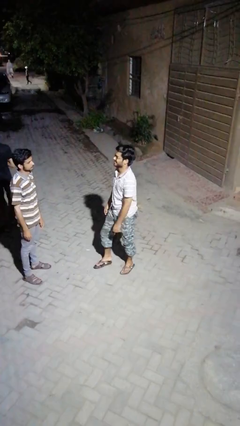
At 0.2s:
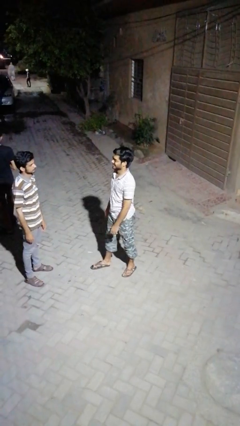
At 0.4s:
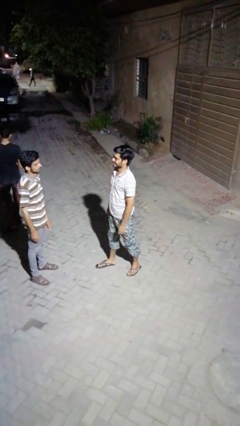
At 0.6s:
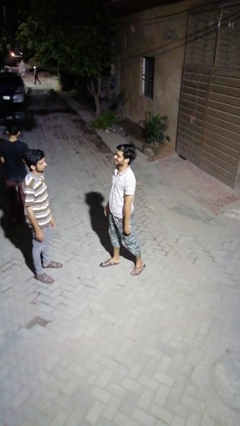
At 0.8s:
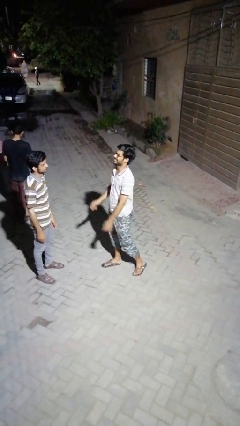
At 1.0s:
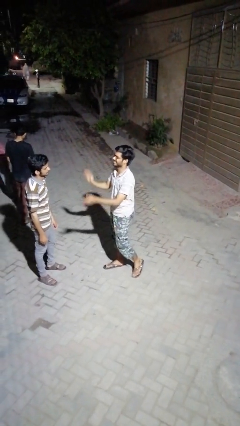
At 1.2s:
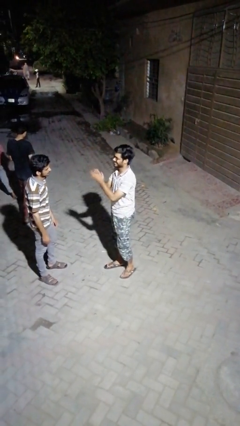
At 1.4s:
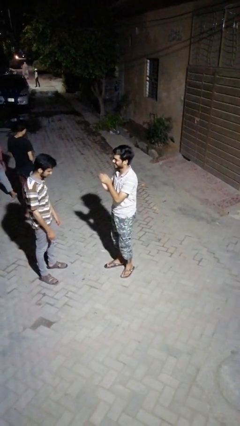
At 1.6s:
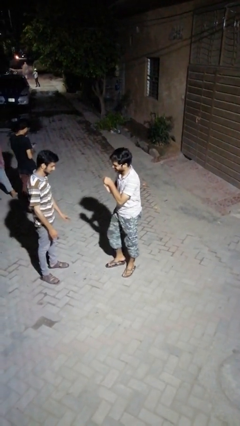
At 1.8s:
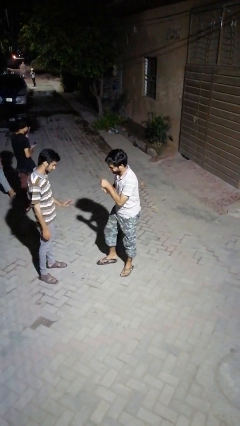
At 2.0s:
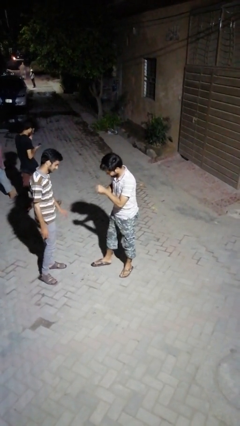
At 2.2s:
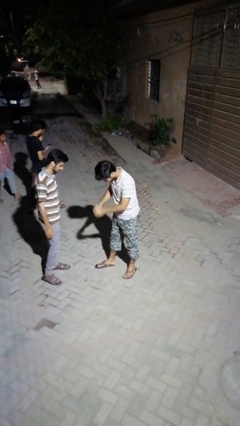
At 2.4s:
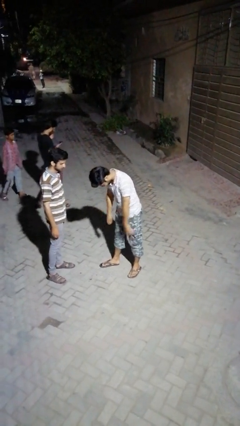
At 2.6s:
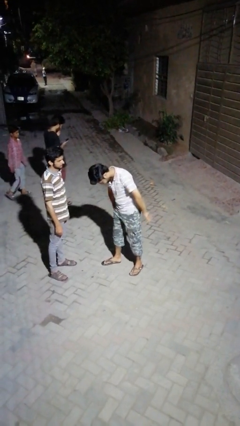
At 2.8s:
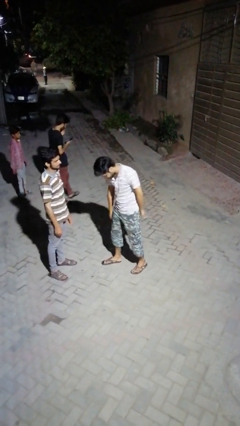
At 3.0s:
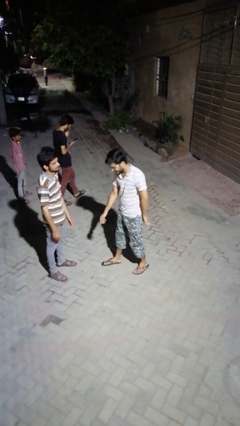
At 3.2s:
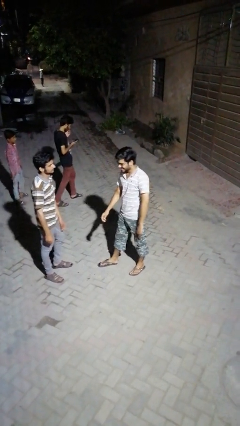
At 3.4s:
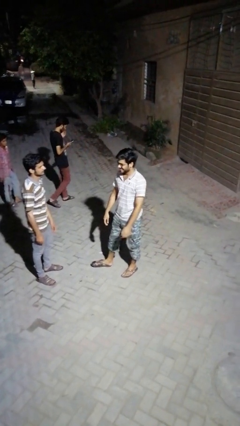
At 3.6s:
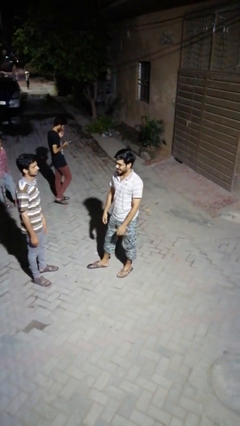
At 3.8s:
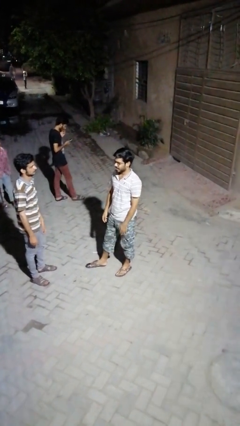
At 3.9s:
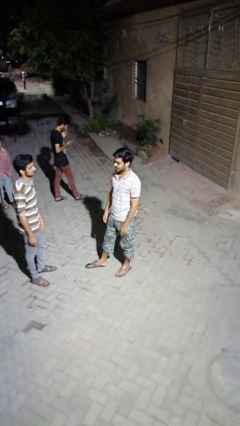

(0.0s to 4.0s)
person laughs with person

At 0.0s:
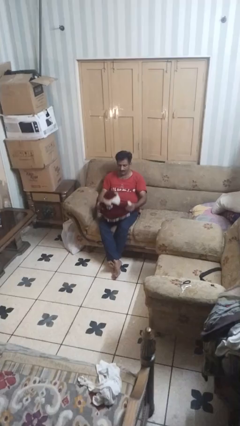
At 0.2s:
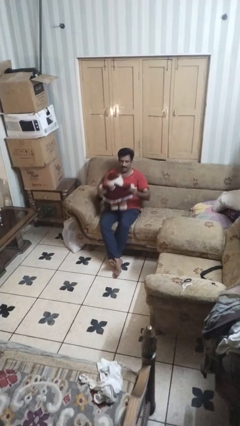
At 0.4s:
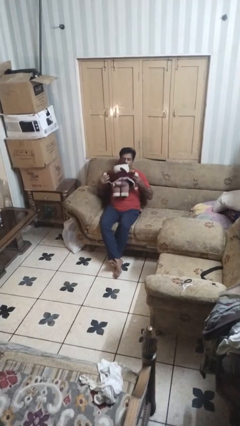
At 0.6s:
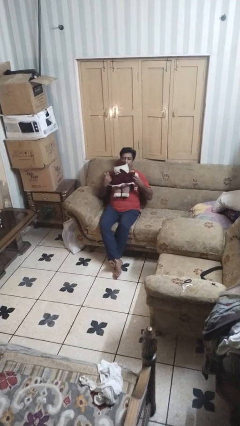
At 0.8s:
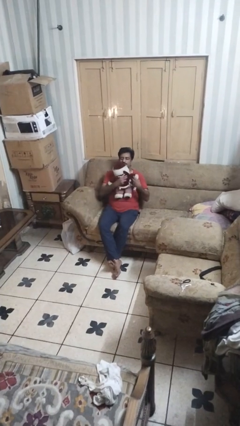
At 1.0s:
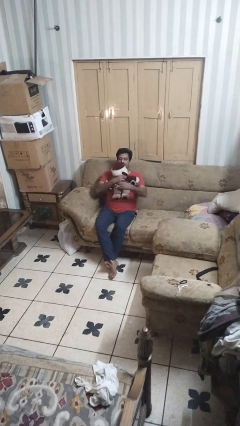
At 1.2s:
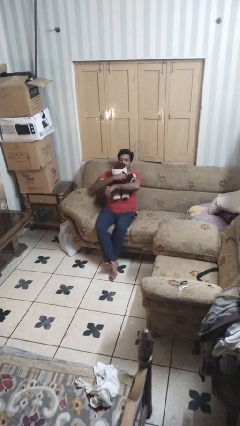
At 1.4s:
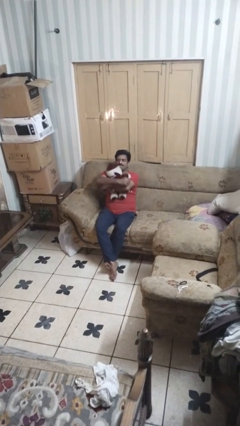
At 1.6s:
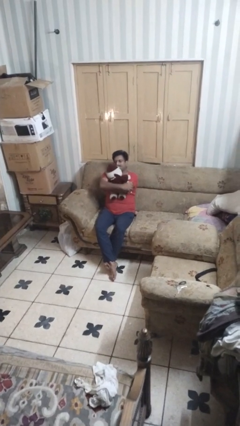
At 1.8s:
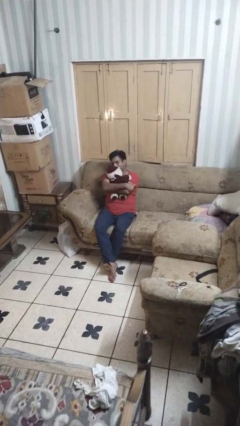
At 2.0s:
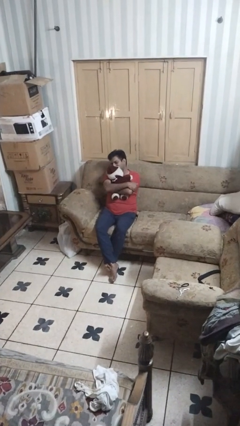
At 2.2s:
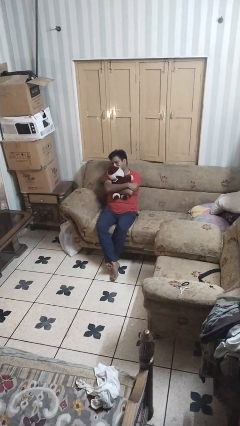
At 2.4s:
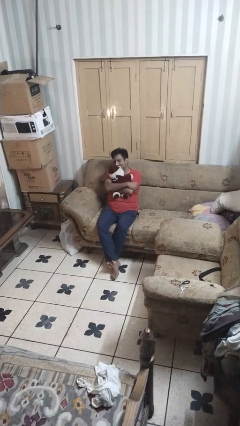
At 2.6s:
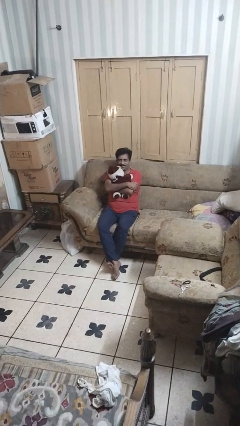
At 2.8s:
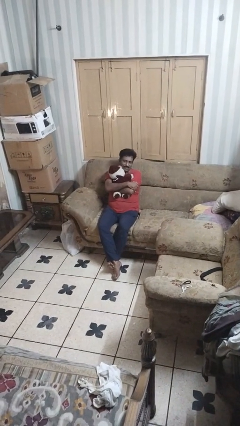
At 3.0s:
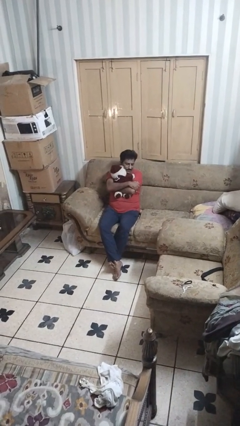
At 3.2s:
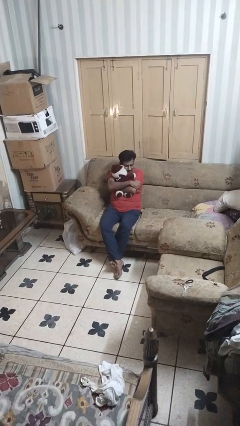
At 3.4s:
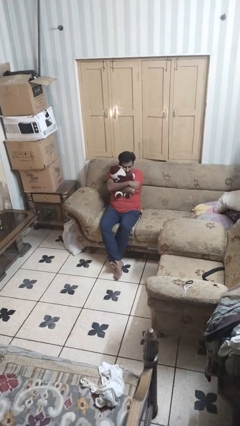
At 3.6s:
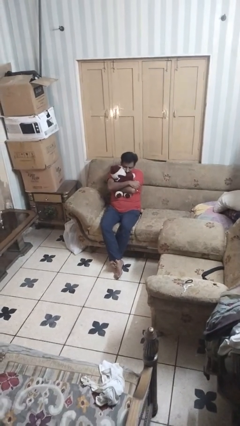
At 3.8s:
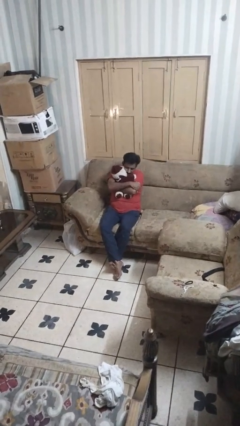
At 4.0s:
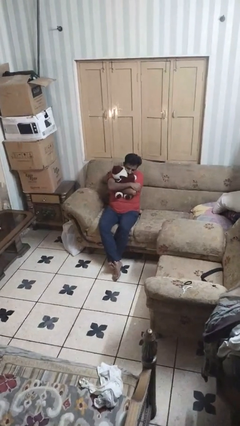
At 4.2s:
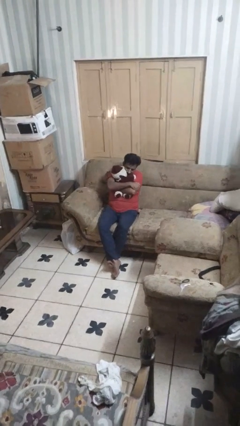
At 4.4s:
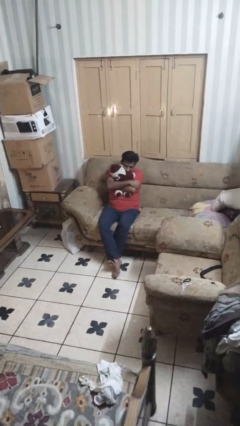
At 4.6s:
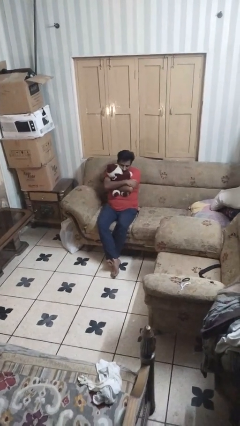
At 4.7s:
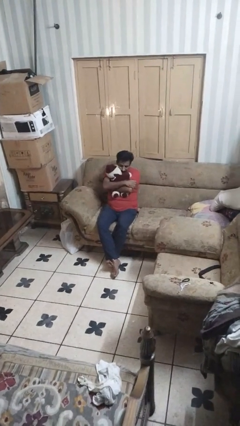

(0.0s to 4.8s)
person hugs stuffed animal

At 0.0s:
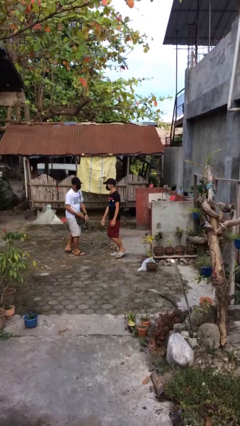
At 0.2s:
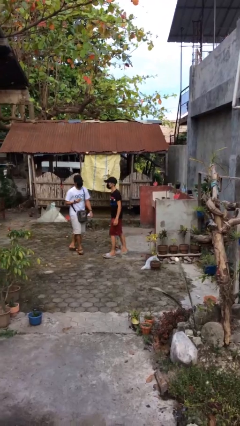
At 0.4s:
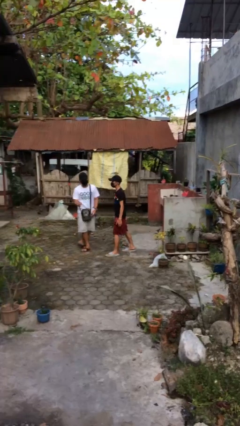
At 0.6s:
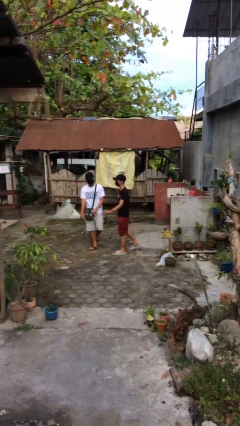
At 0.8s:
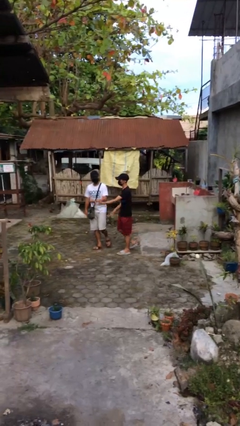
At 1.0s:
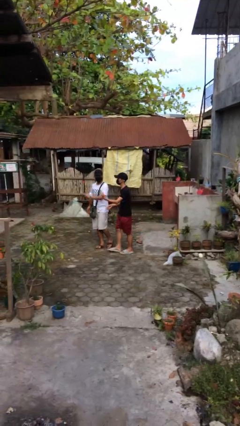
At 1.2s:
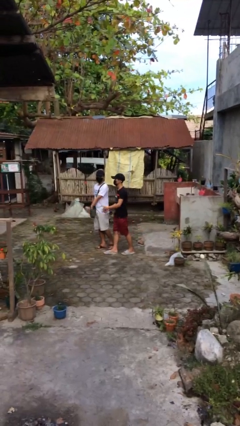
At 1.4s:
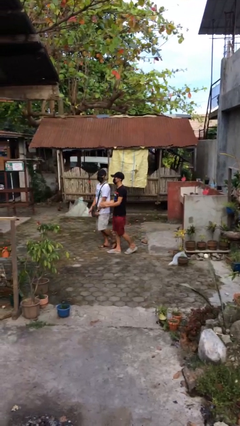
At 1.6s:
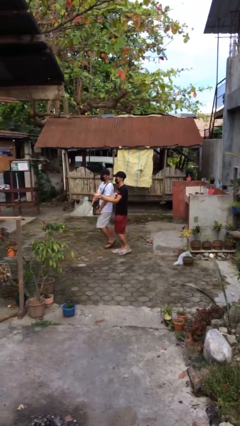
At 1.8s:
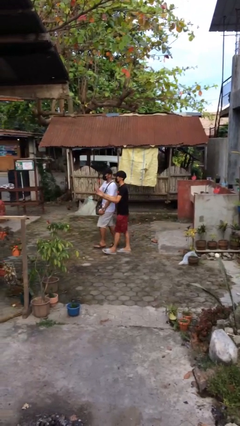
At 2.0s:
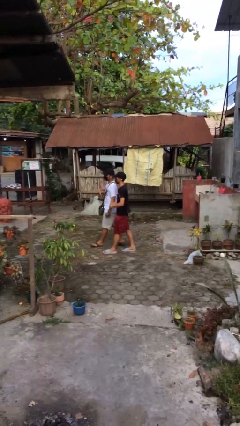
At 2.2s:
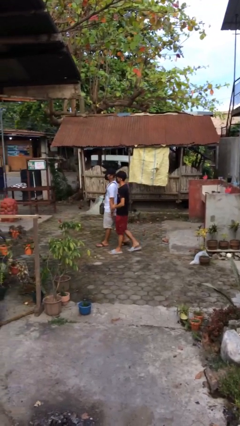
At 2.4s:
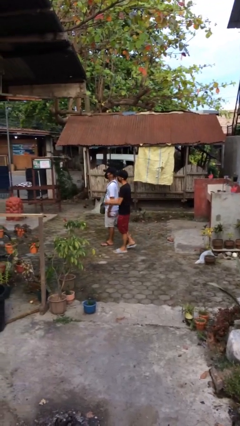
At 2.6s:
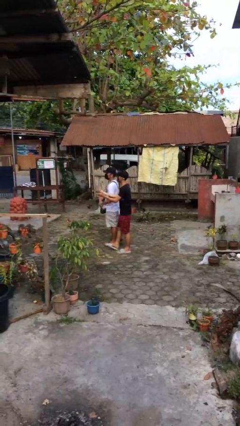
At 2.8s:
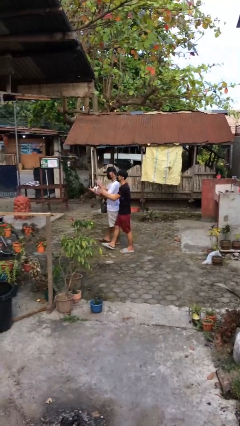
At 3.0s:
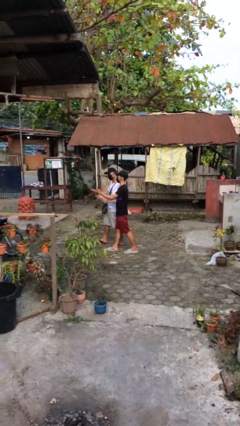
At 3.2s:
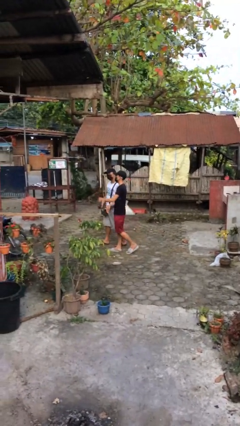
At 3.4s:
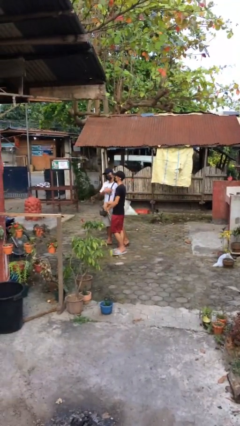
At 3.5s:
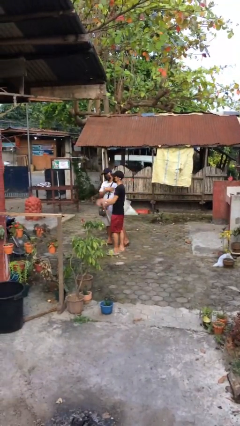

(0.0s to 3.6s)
person talks to person

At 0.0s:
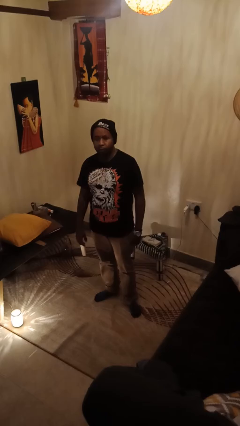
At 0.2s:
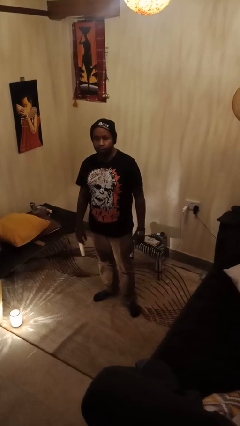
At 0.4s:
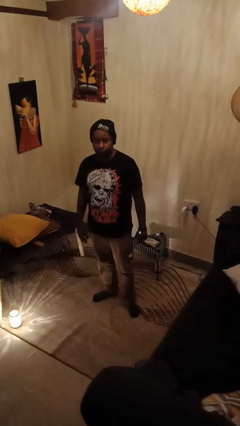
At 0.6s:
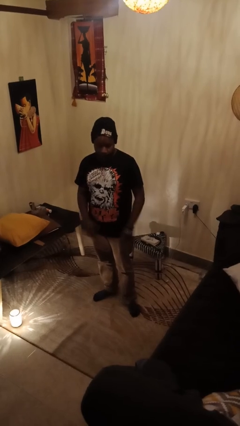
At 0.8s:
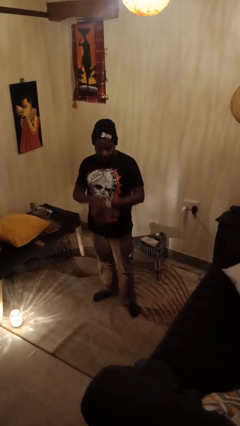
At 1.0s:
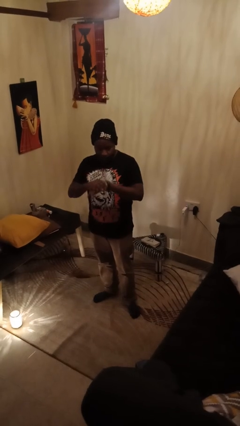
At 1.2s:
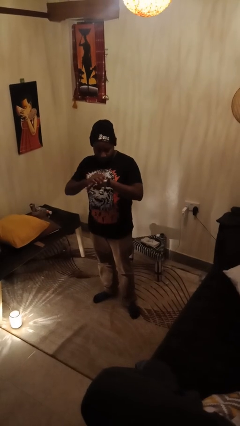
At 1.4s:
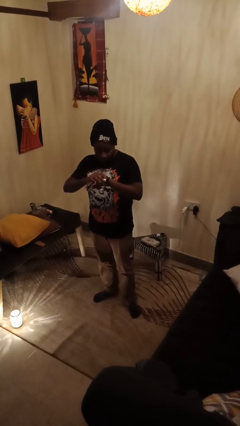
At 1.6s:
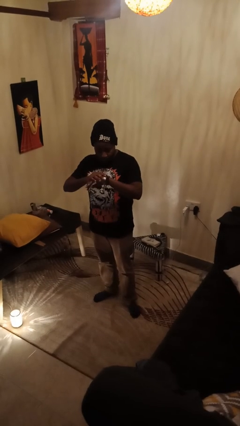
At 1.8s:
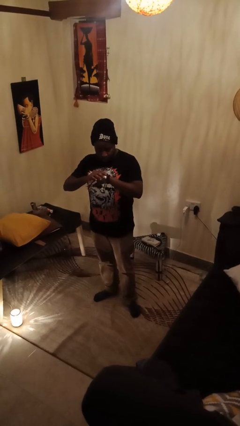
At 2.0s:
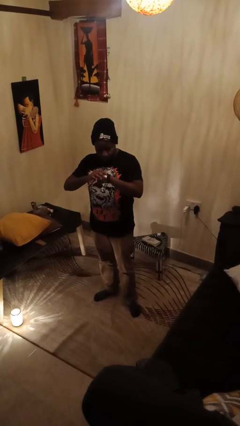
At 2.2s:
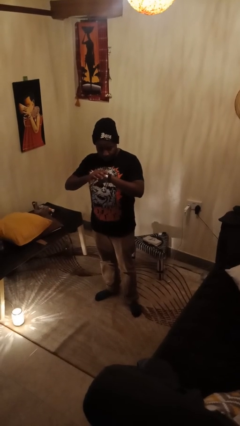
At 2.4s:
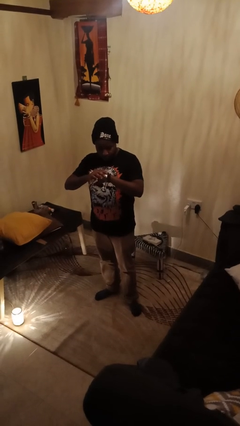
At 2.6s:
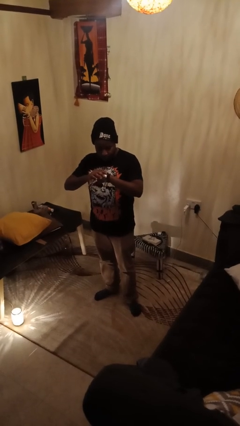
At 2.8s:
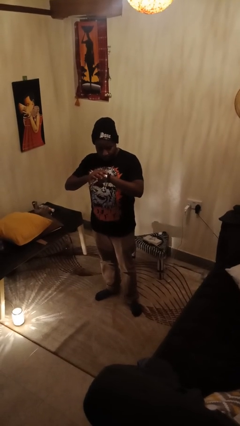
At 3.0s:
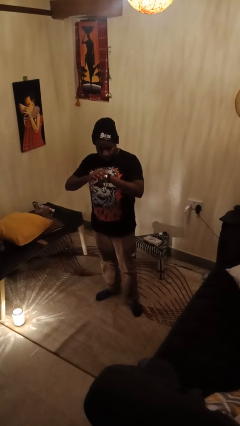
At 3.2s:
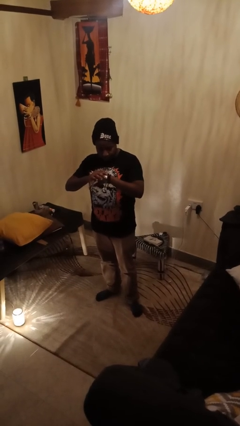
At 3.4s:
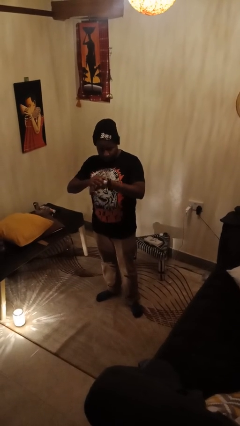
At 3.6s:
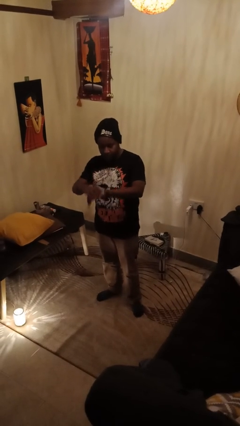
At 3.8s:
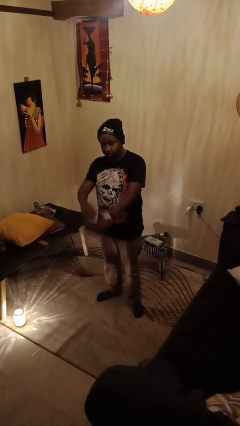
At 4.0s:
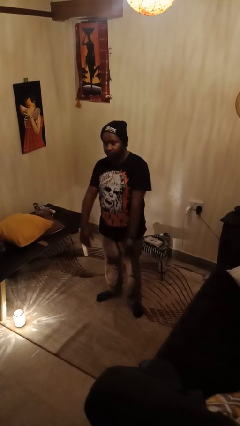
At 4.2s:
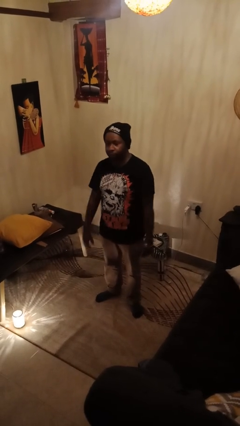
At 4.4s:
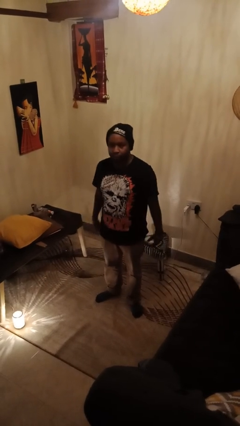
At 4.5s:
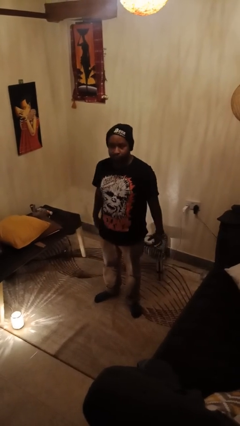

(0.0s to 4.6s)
person looks at wristwatch

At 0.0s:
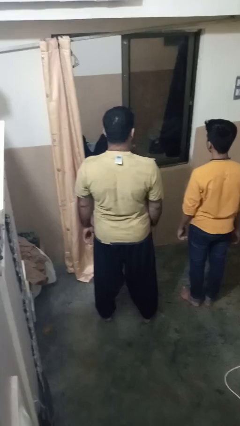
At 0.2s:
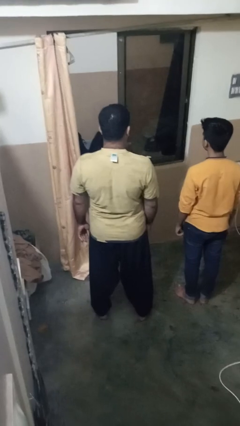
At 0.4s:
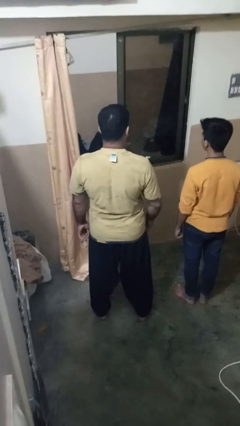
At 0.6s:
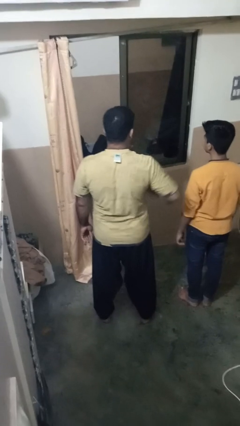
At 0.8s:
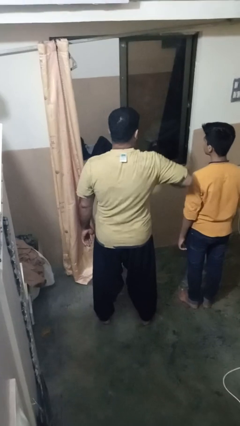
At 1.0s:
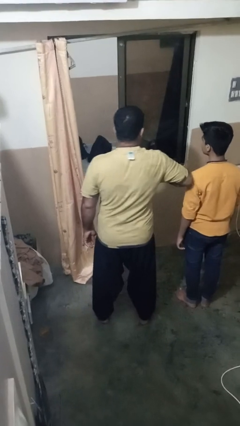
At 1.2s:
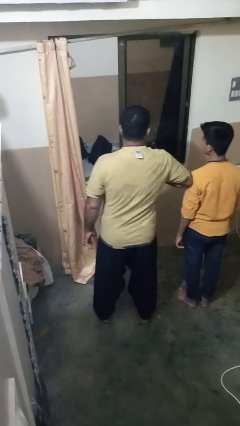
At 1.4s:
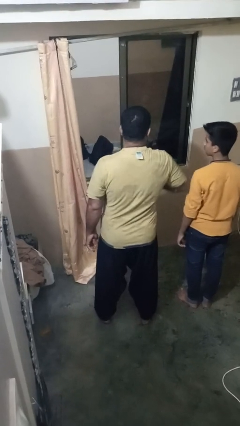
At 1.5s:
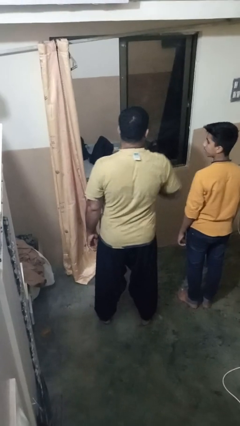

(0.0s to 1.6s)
person nudges person with elbow
